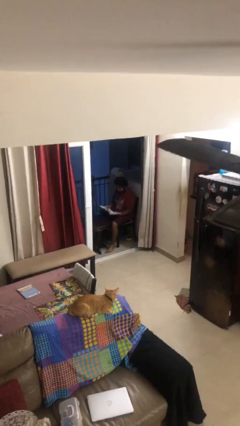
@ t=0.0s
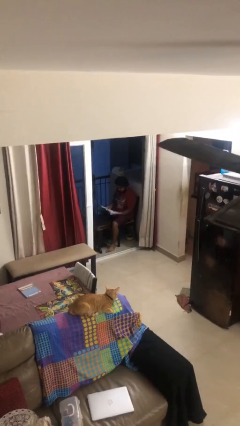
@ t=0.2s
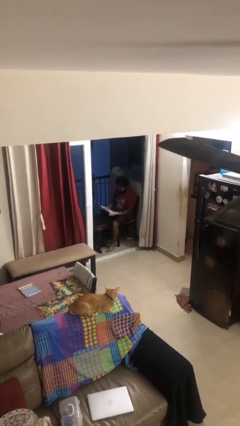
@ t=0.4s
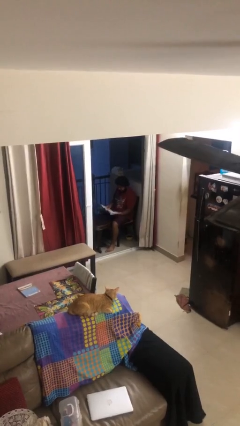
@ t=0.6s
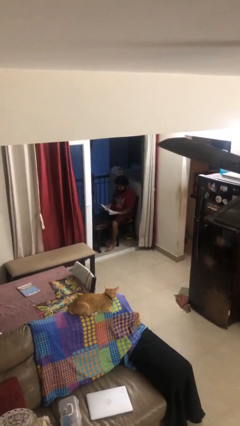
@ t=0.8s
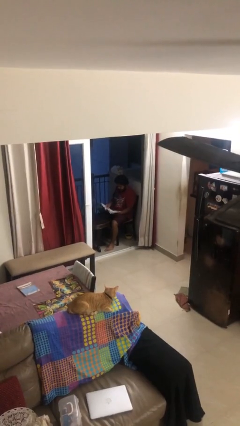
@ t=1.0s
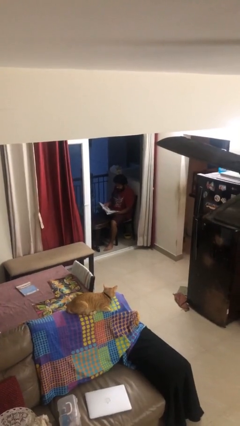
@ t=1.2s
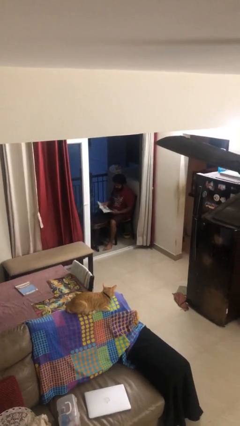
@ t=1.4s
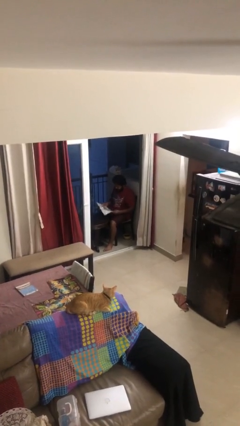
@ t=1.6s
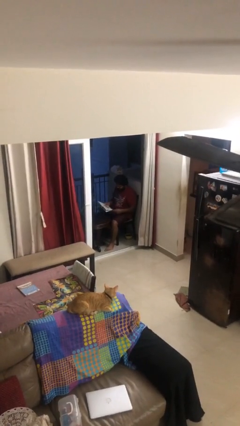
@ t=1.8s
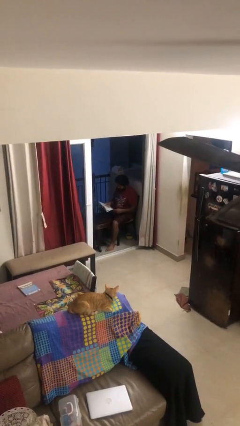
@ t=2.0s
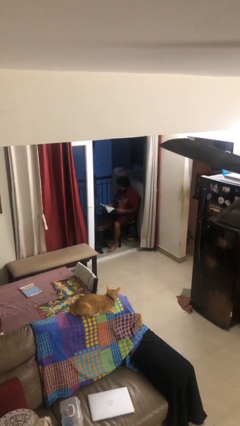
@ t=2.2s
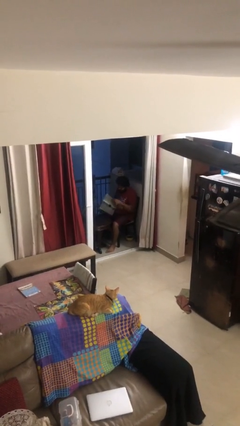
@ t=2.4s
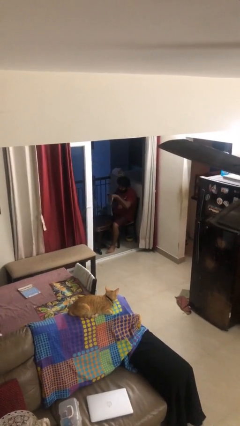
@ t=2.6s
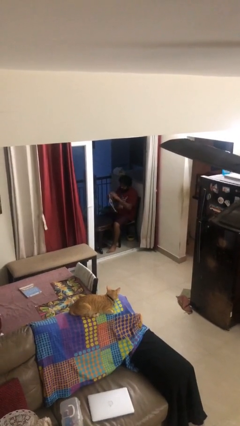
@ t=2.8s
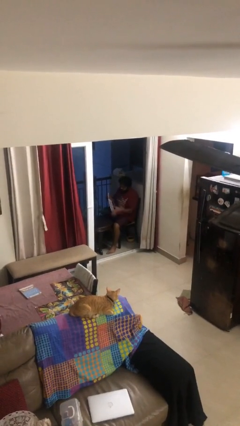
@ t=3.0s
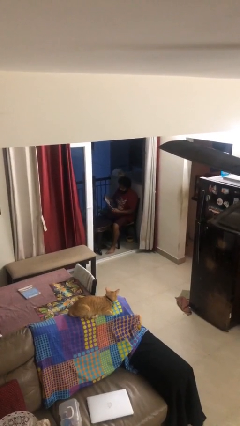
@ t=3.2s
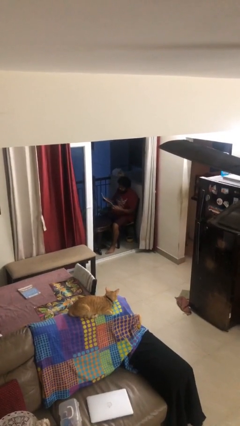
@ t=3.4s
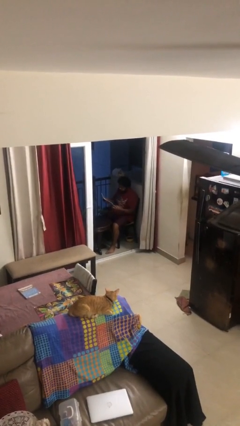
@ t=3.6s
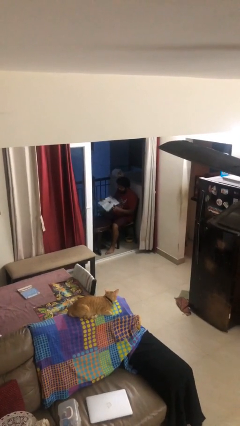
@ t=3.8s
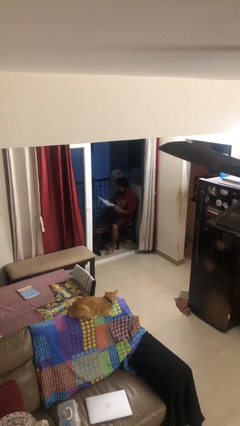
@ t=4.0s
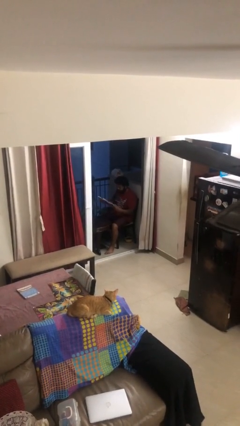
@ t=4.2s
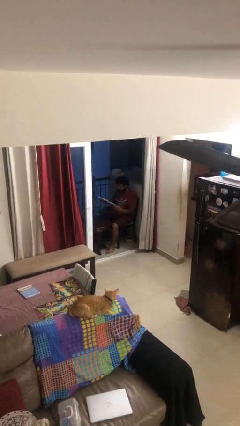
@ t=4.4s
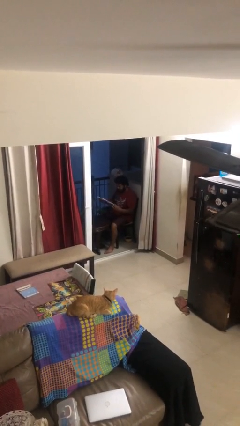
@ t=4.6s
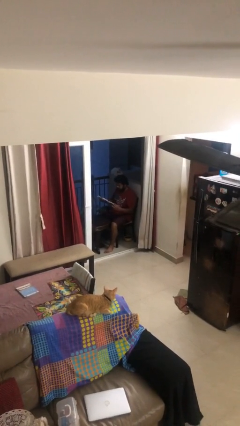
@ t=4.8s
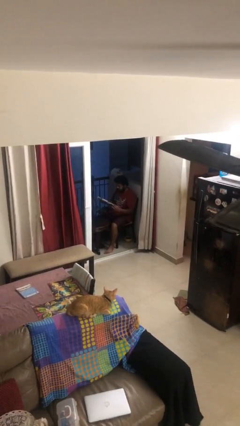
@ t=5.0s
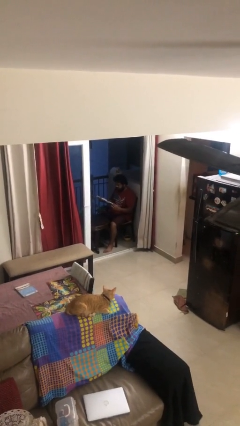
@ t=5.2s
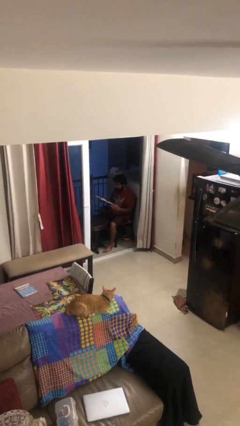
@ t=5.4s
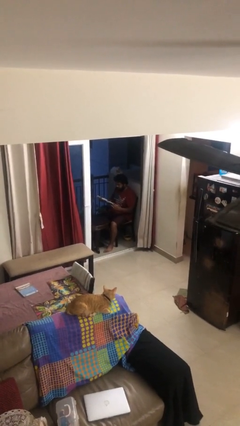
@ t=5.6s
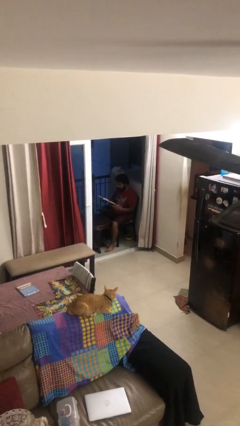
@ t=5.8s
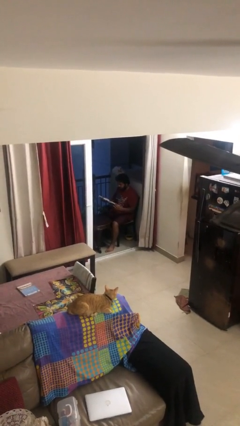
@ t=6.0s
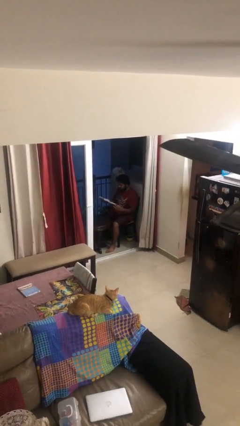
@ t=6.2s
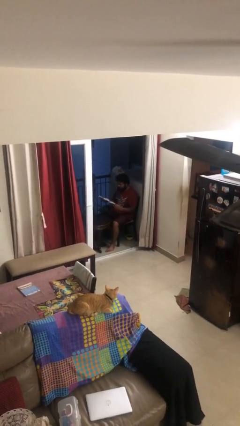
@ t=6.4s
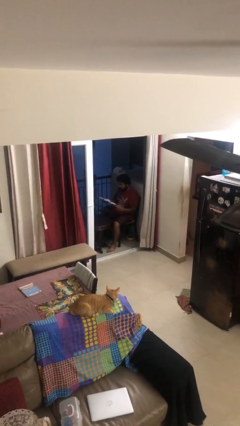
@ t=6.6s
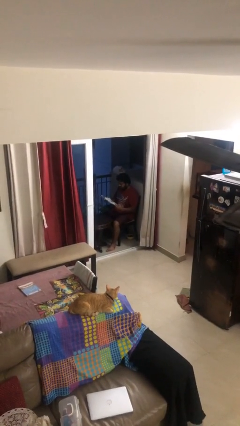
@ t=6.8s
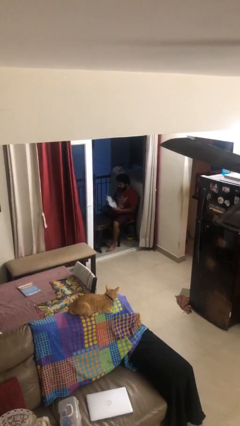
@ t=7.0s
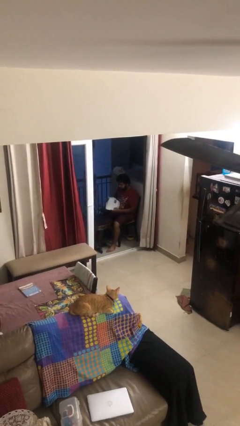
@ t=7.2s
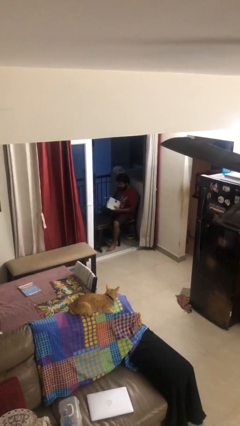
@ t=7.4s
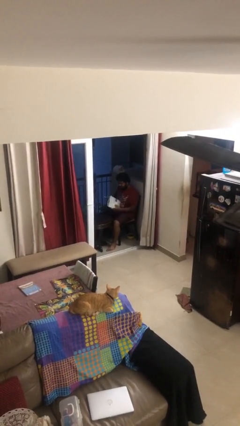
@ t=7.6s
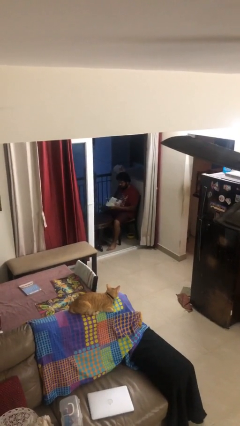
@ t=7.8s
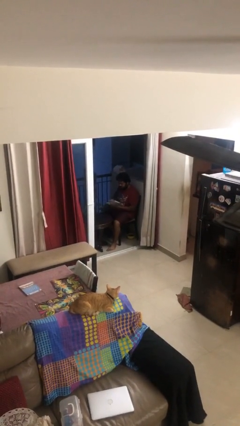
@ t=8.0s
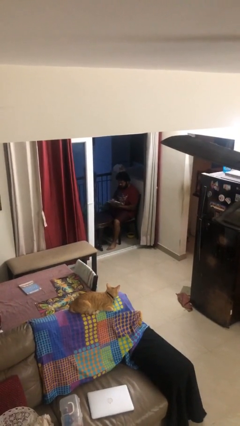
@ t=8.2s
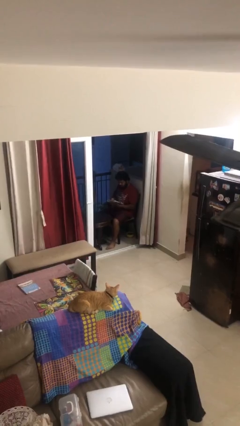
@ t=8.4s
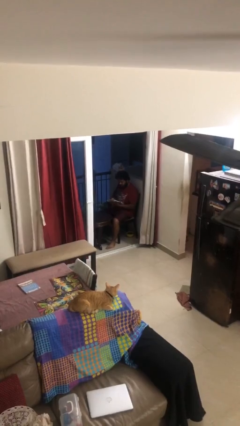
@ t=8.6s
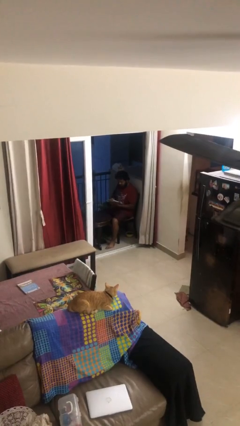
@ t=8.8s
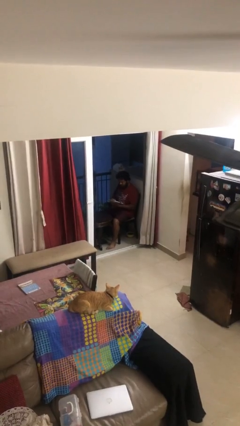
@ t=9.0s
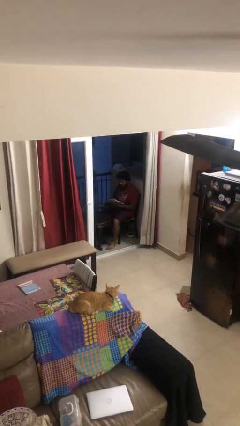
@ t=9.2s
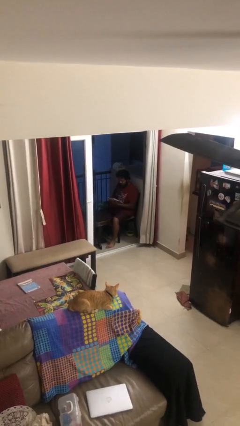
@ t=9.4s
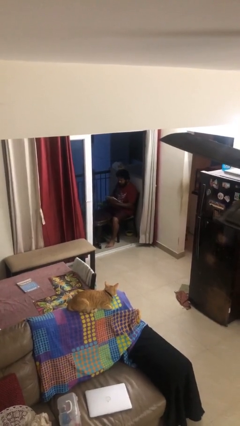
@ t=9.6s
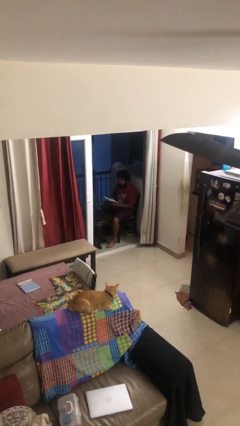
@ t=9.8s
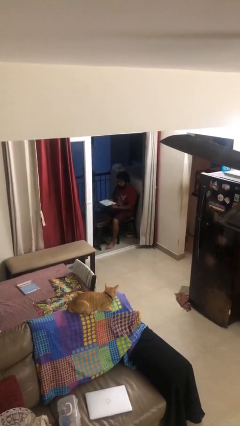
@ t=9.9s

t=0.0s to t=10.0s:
person reads document

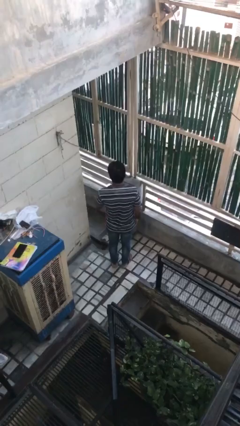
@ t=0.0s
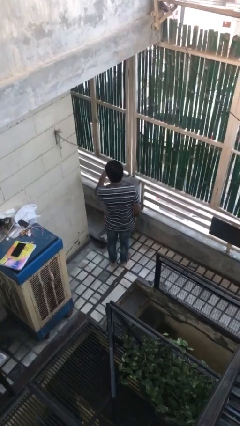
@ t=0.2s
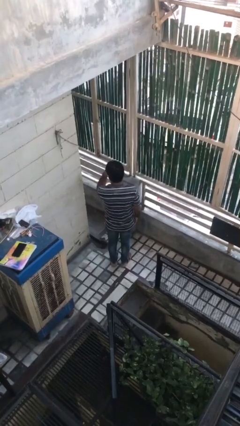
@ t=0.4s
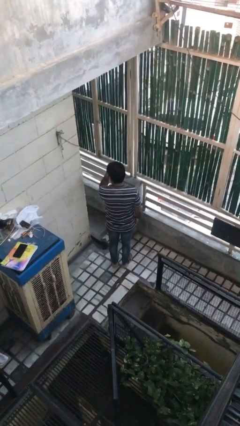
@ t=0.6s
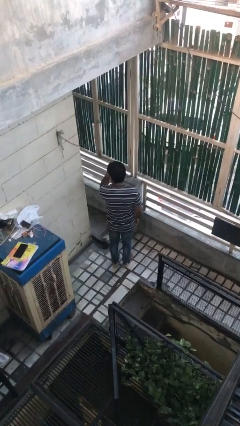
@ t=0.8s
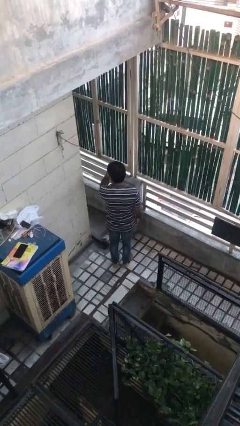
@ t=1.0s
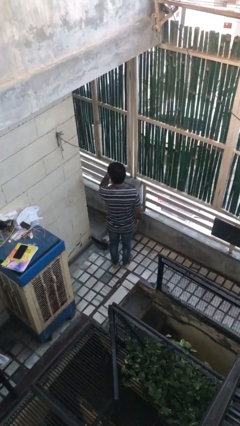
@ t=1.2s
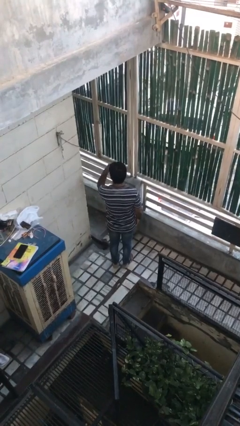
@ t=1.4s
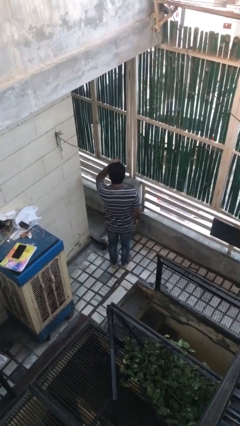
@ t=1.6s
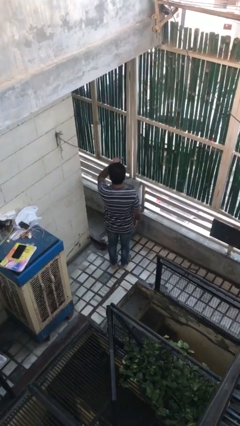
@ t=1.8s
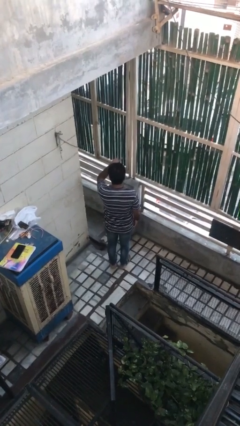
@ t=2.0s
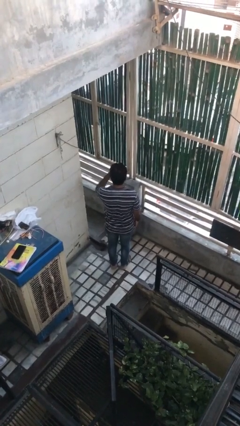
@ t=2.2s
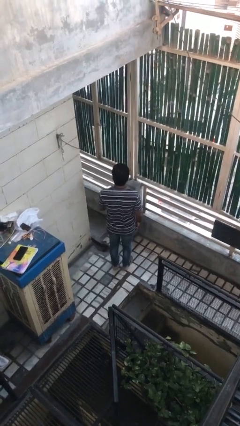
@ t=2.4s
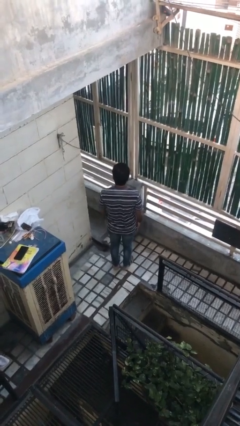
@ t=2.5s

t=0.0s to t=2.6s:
person gestures watch closely

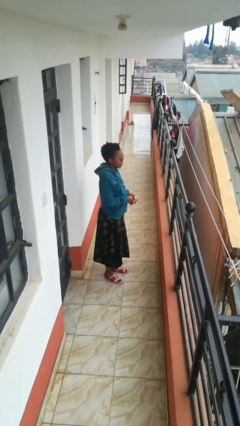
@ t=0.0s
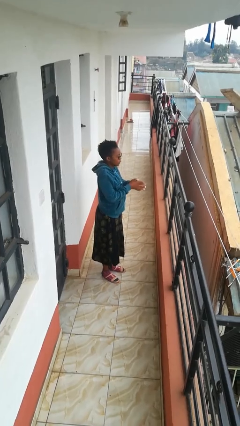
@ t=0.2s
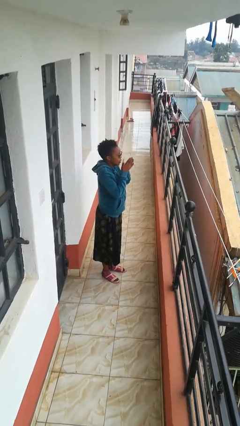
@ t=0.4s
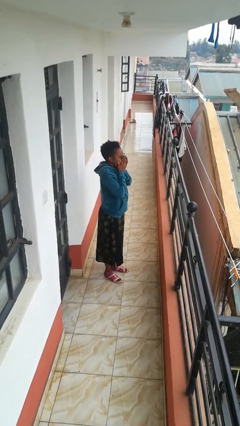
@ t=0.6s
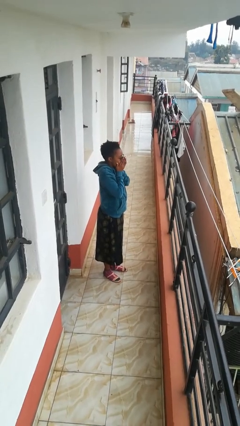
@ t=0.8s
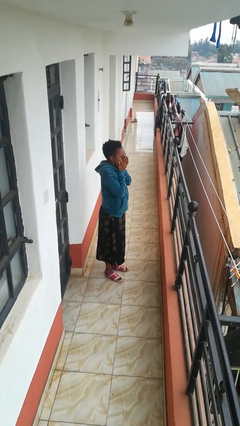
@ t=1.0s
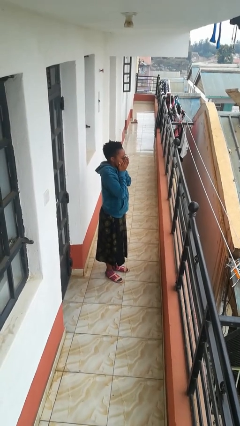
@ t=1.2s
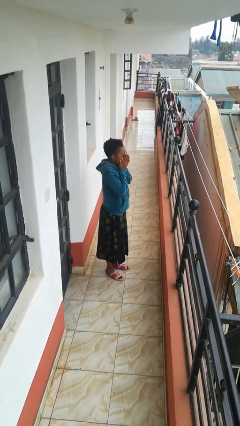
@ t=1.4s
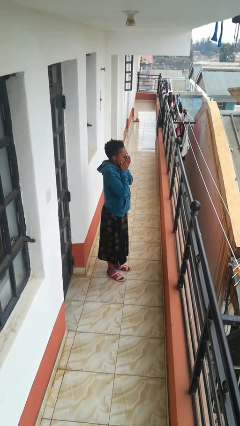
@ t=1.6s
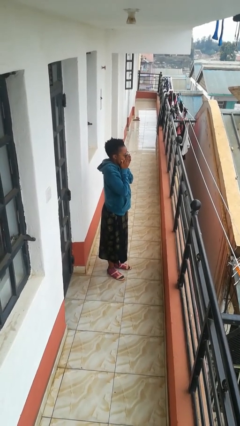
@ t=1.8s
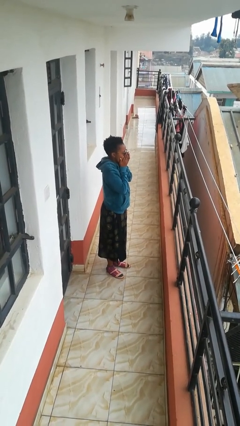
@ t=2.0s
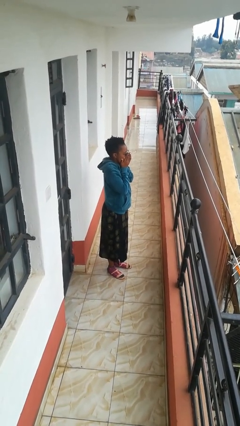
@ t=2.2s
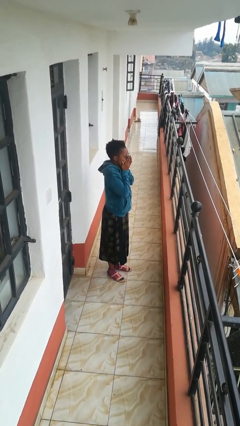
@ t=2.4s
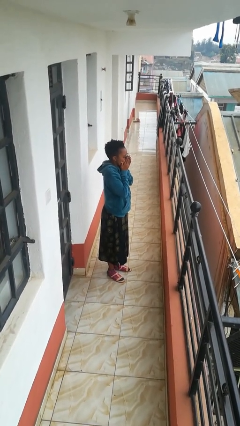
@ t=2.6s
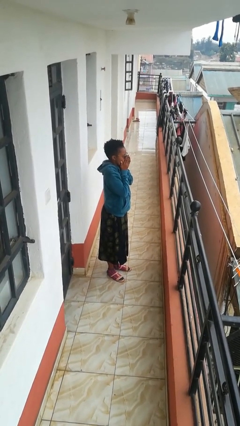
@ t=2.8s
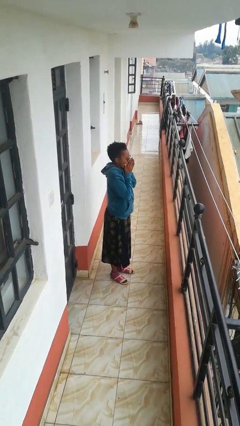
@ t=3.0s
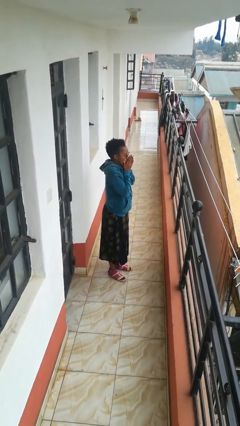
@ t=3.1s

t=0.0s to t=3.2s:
person blows into hands

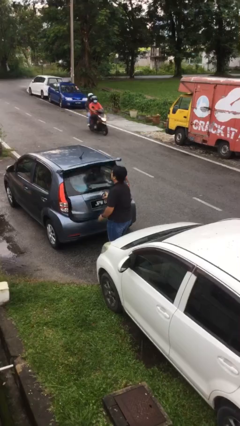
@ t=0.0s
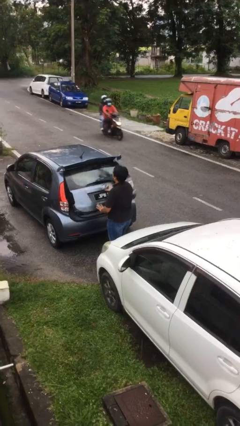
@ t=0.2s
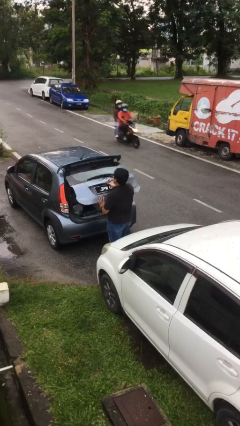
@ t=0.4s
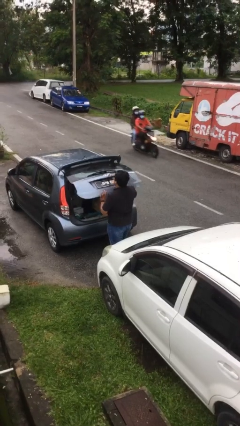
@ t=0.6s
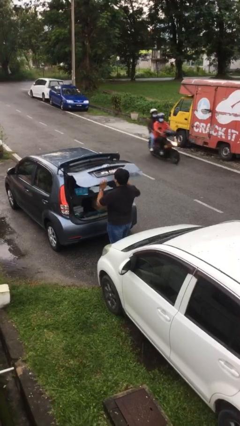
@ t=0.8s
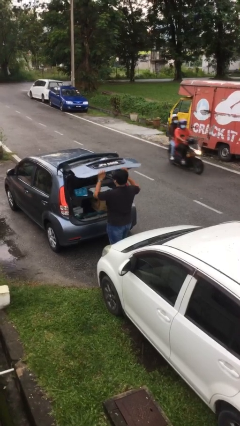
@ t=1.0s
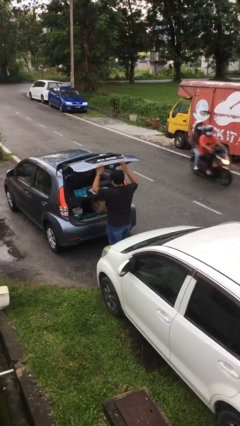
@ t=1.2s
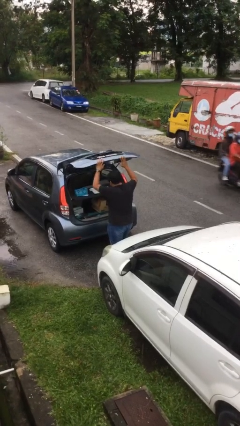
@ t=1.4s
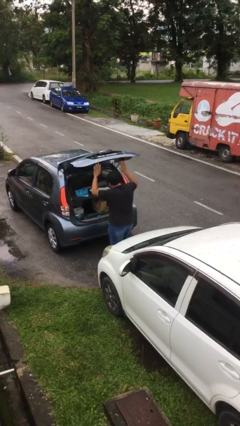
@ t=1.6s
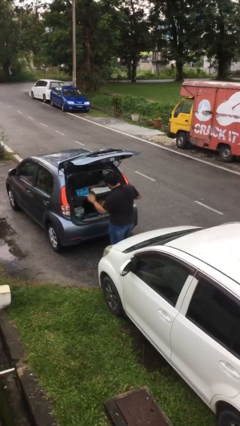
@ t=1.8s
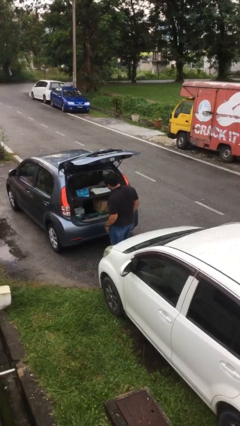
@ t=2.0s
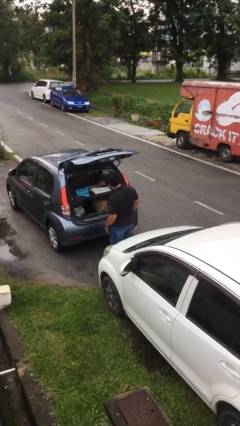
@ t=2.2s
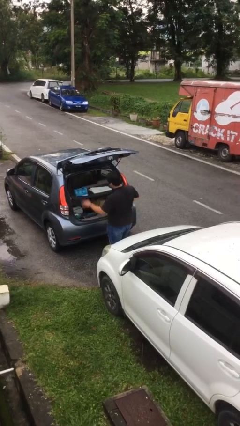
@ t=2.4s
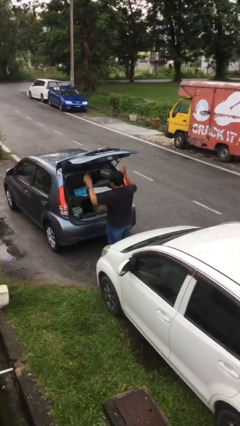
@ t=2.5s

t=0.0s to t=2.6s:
person opens car trunk
